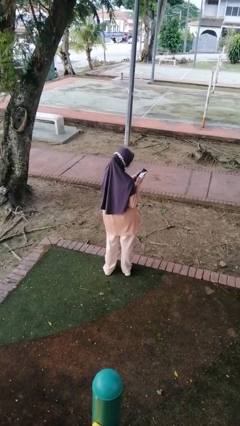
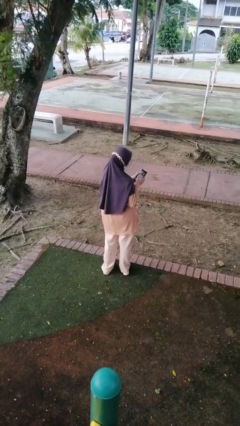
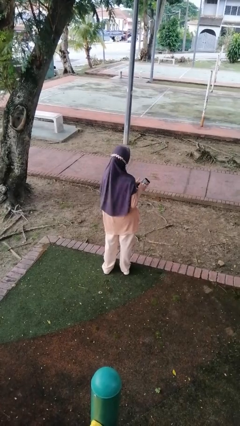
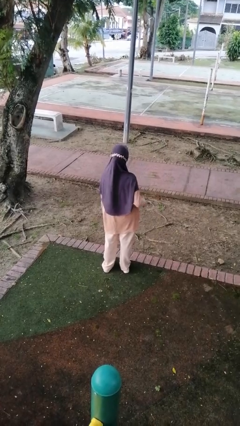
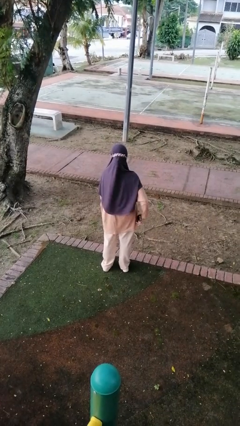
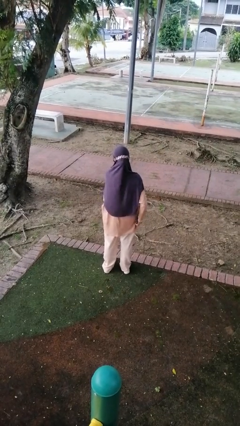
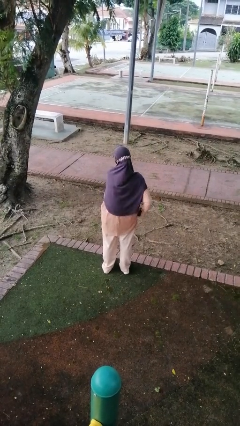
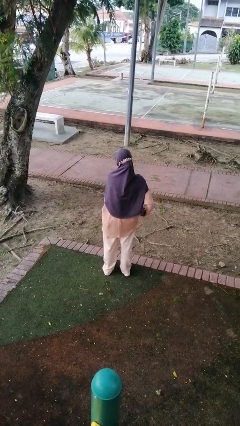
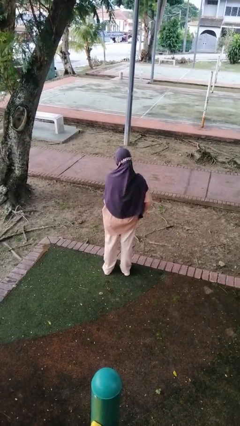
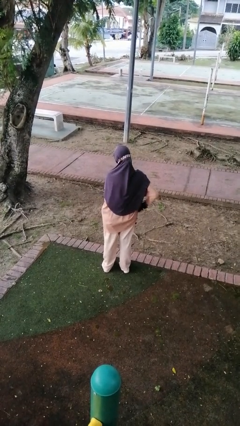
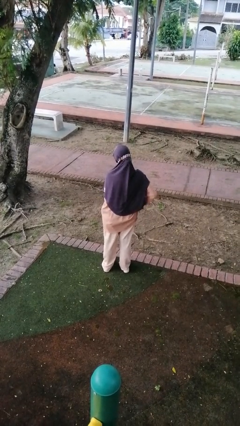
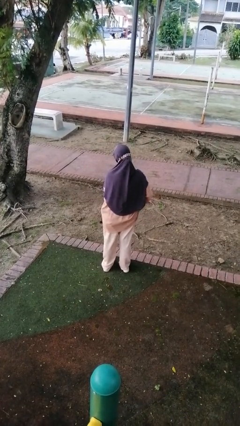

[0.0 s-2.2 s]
person puts phone into pocket

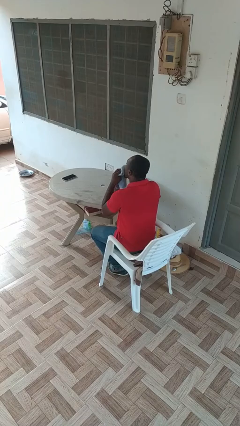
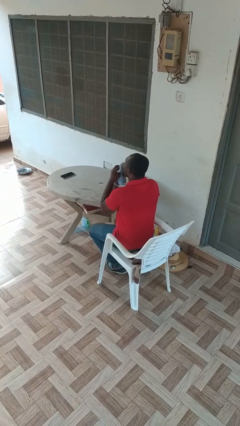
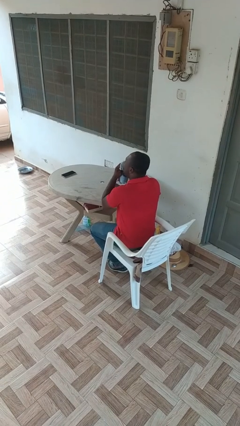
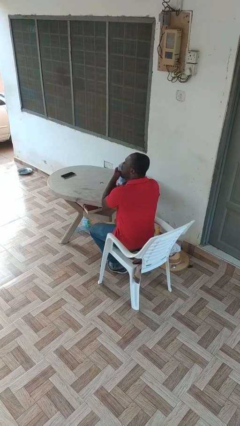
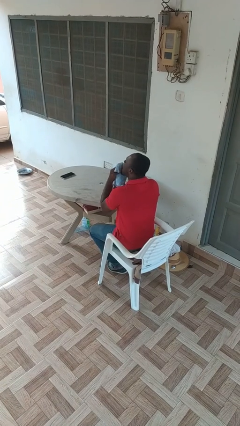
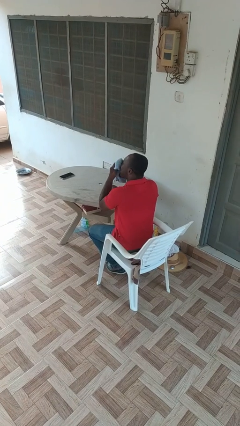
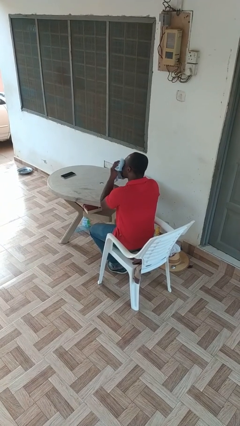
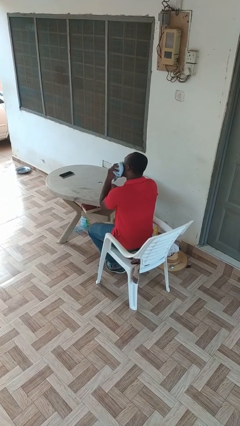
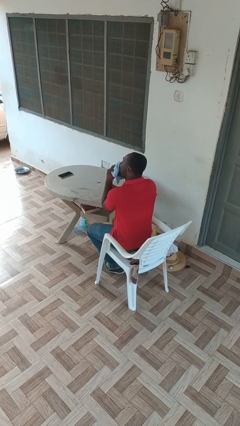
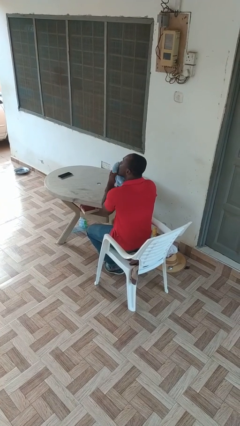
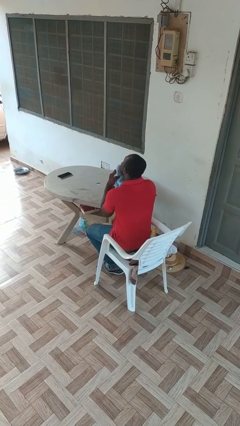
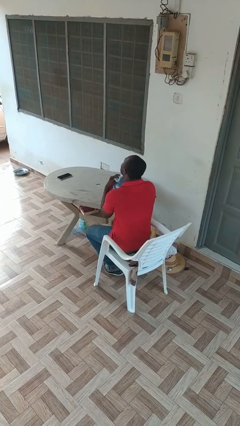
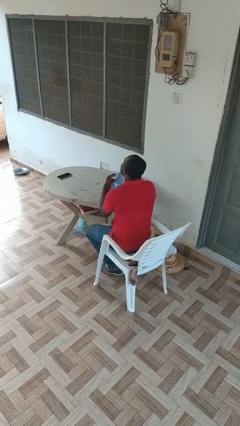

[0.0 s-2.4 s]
person wipes mouth with napkin

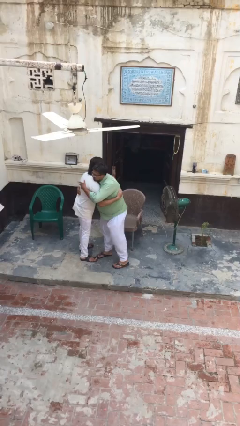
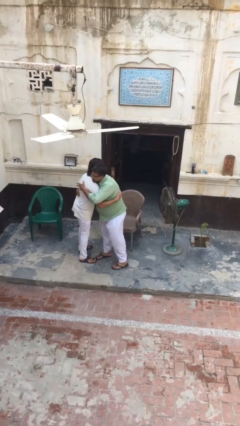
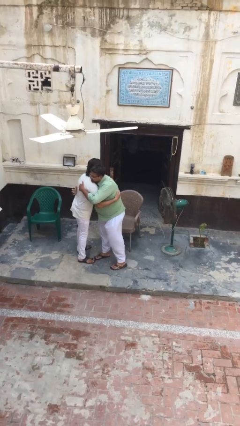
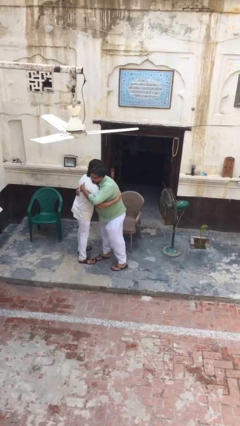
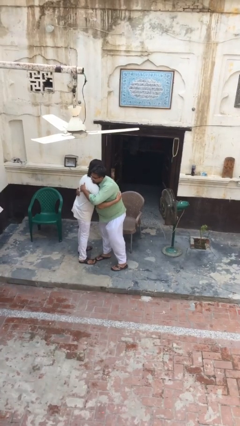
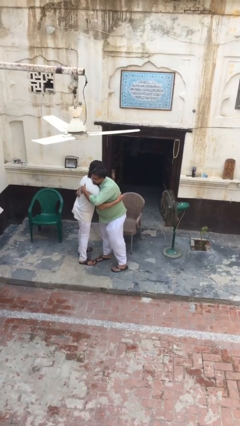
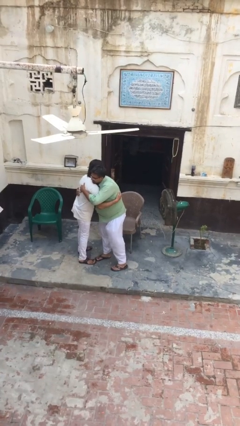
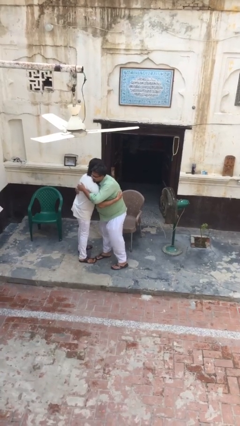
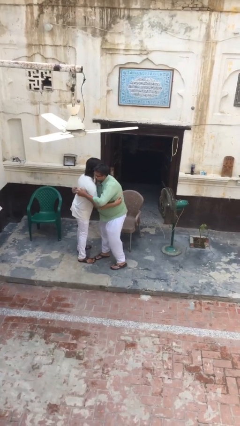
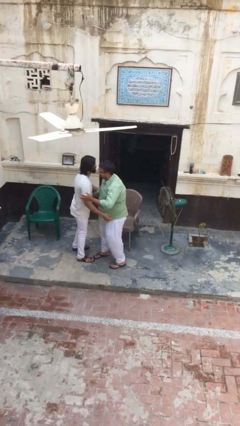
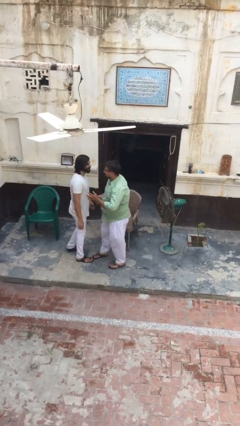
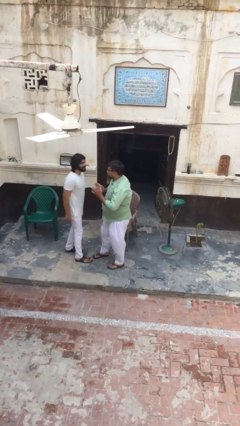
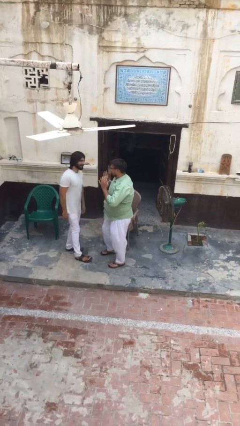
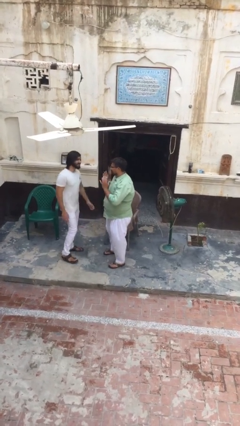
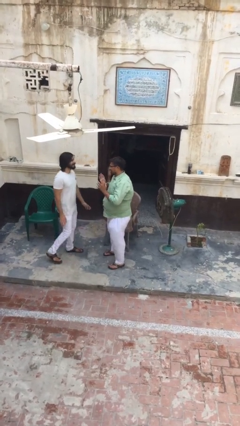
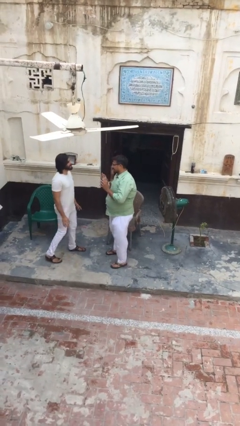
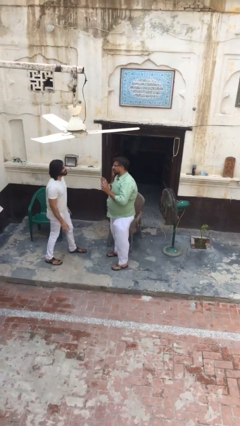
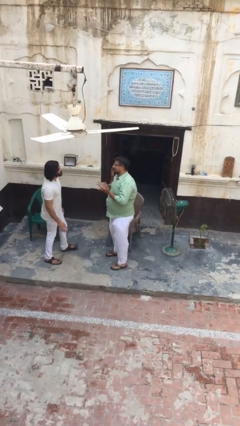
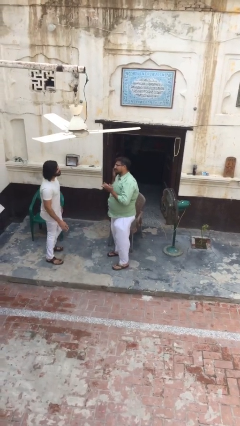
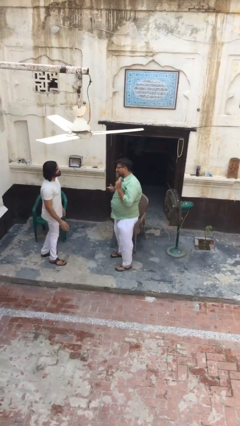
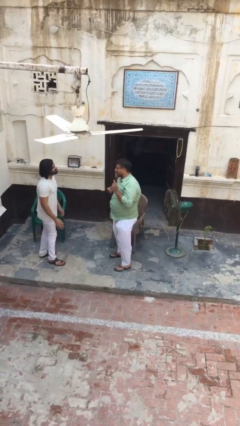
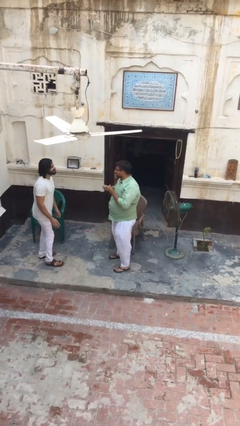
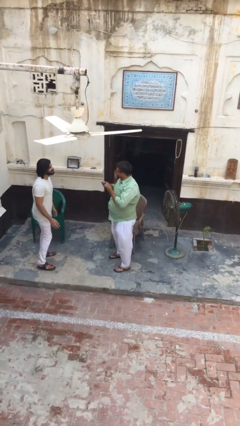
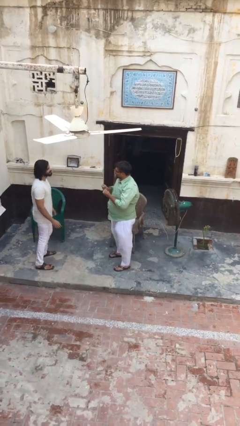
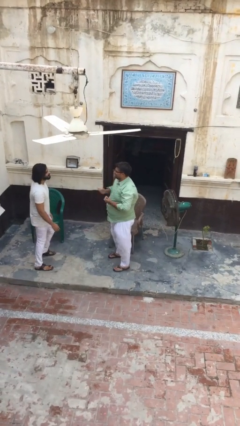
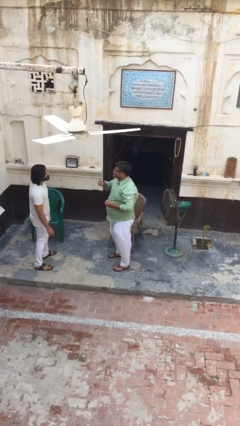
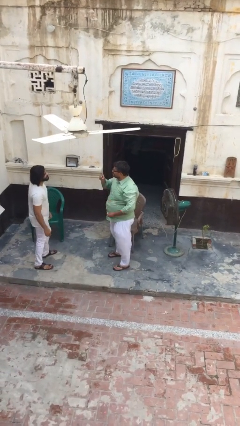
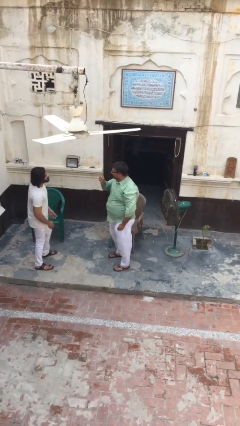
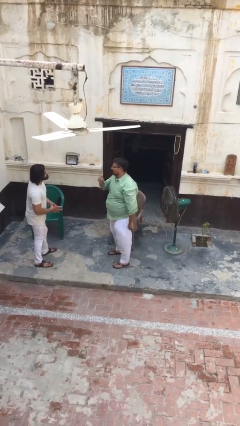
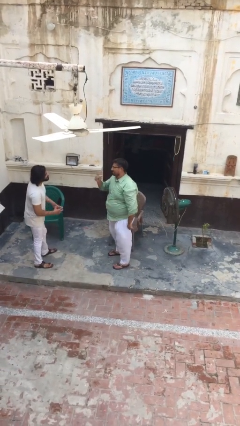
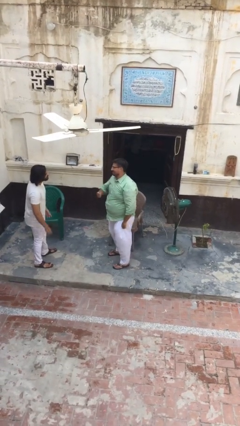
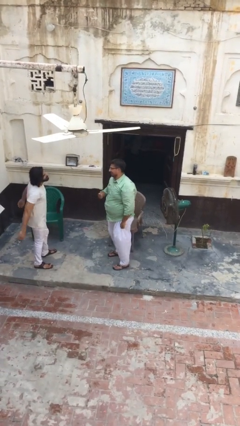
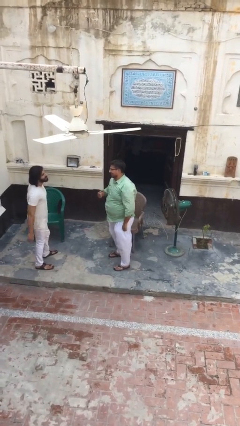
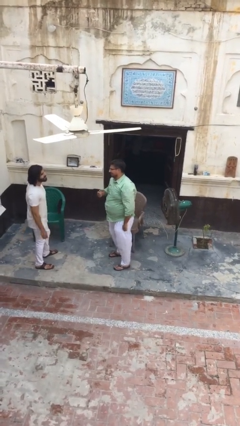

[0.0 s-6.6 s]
person talks to person

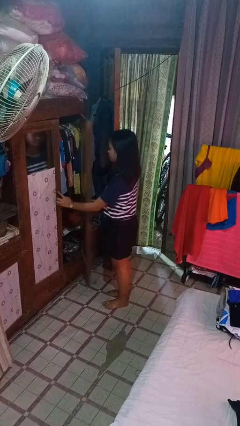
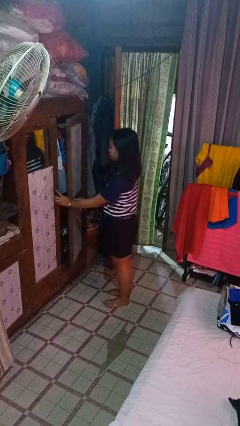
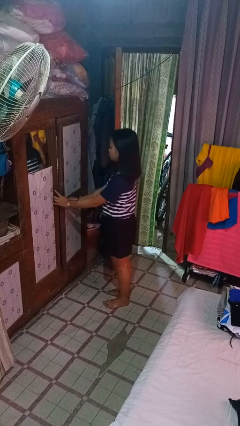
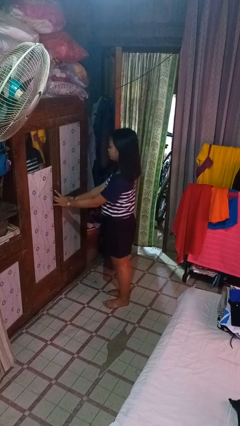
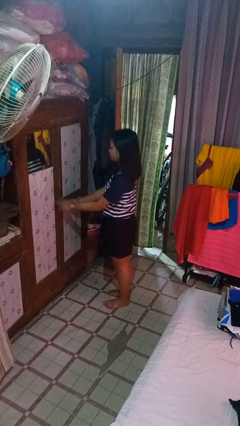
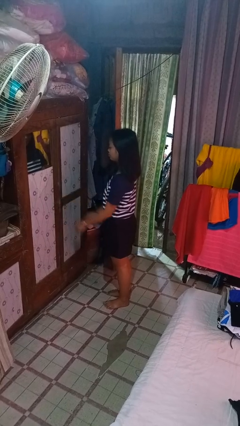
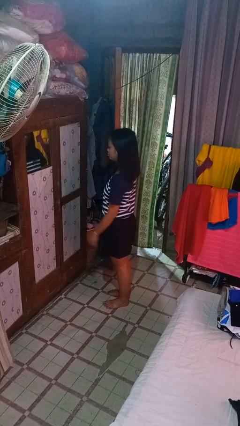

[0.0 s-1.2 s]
person closes closet door

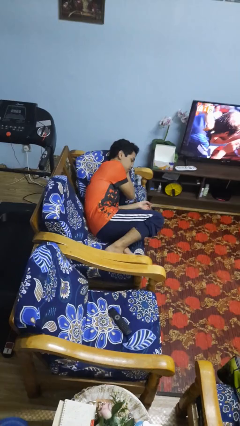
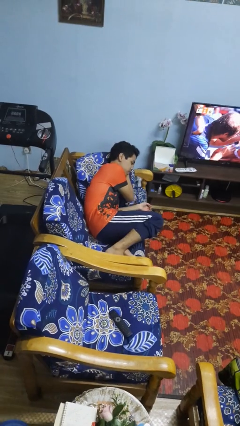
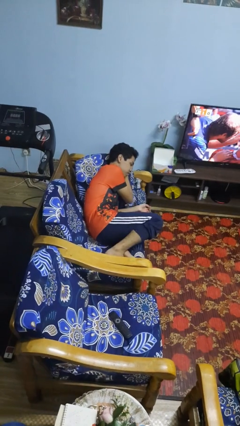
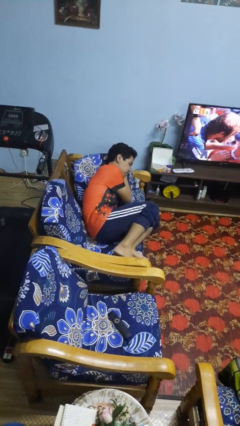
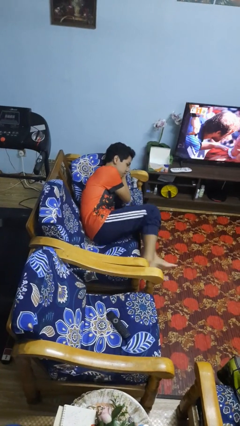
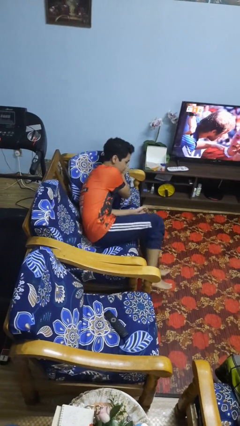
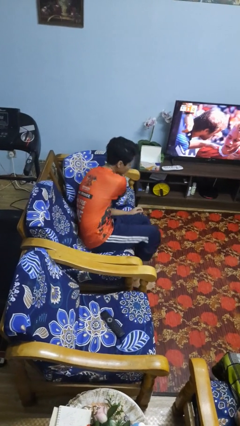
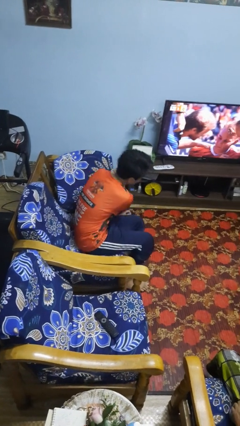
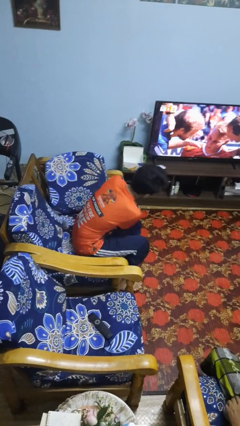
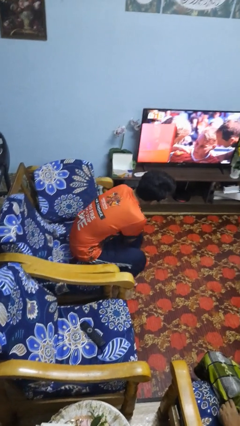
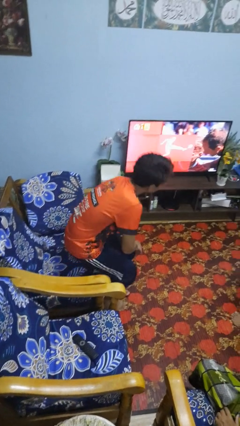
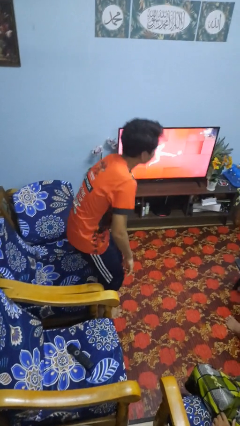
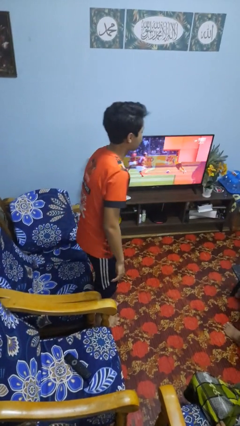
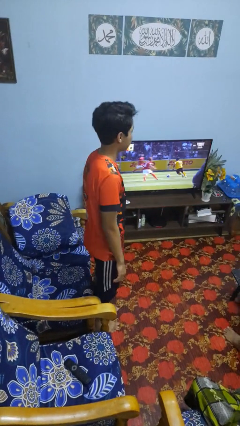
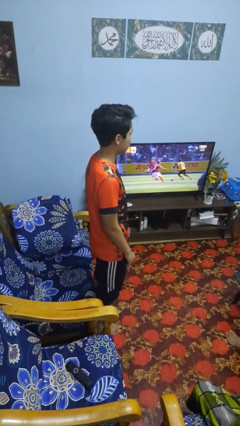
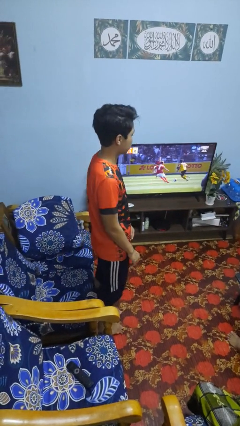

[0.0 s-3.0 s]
person stands up

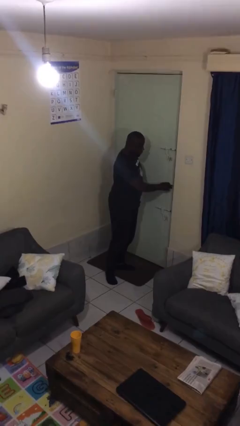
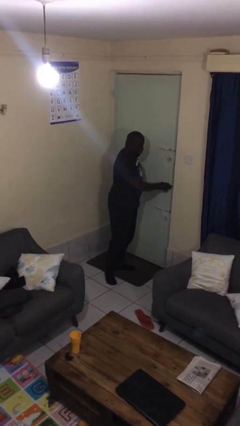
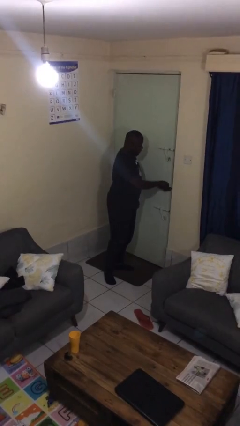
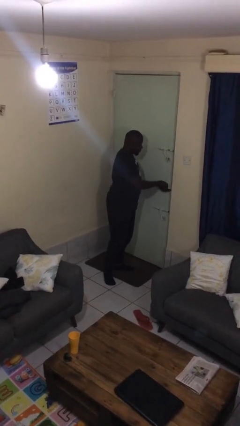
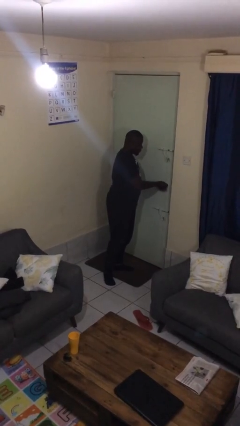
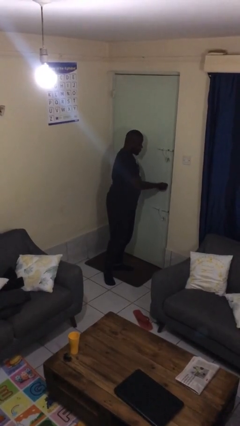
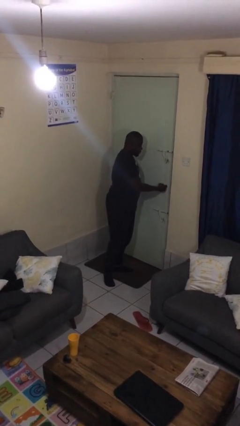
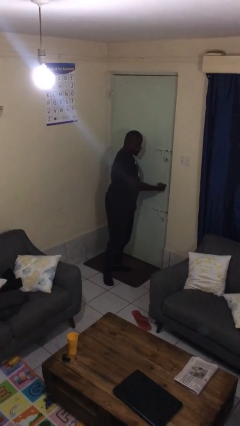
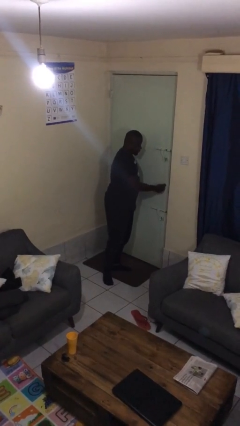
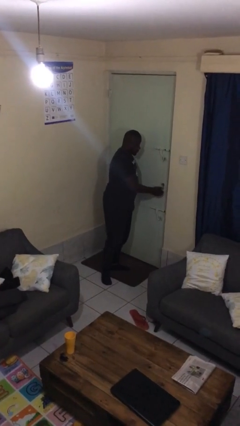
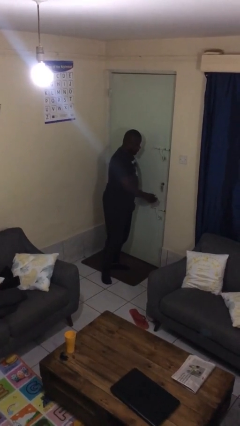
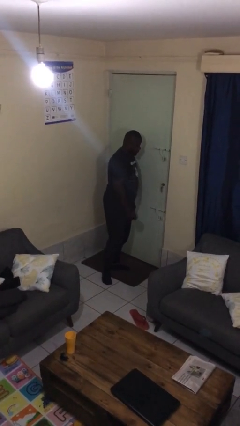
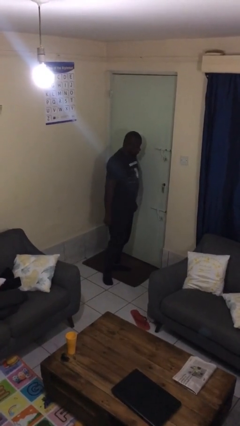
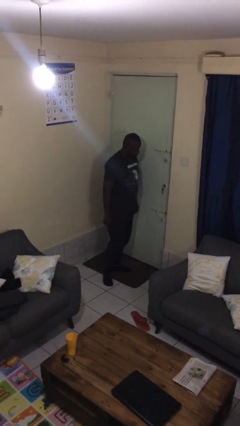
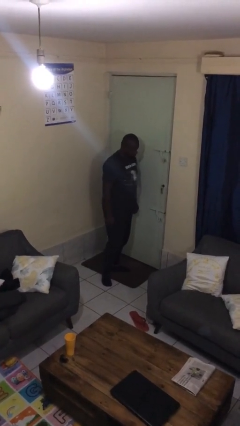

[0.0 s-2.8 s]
person locks door with keys
